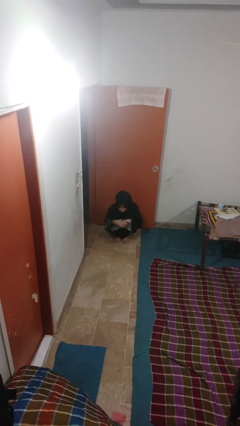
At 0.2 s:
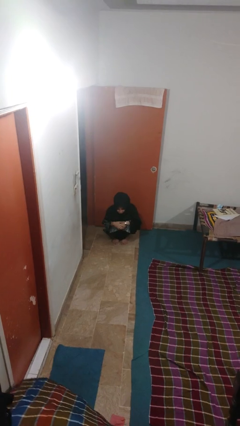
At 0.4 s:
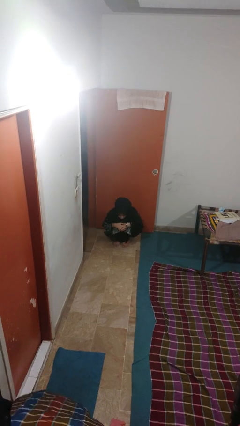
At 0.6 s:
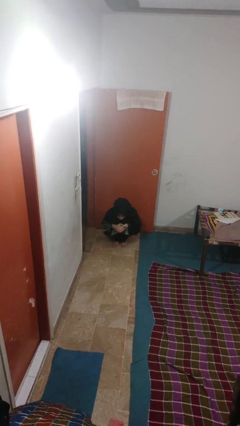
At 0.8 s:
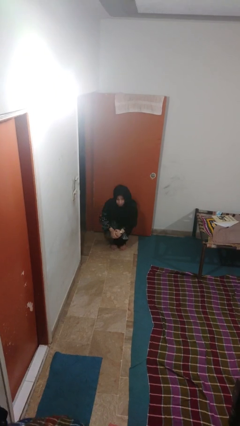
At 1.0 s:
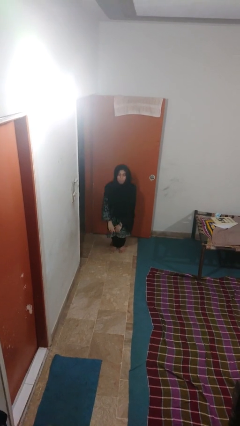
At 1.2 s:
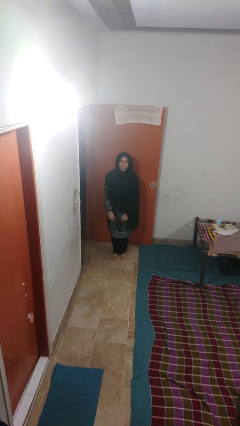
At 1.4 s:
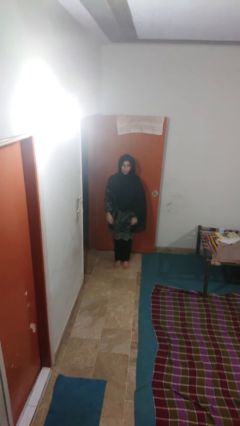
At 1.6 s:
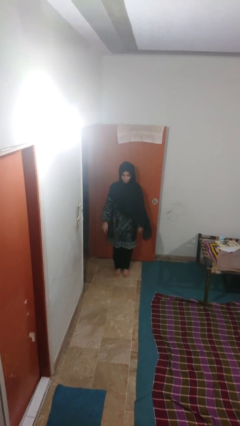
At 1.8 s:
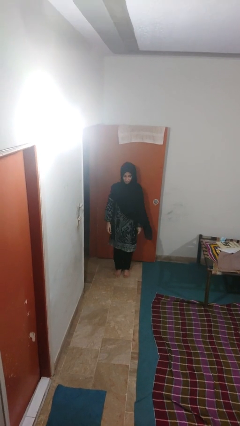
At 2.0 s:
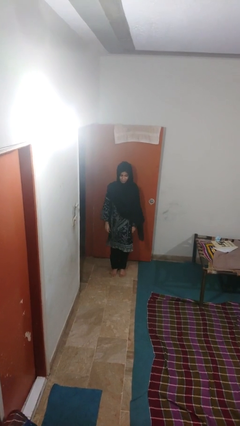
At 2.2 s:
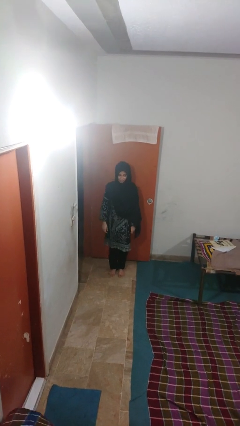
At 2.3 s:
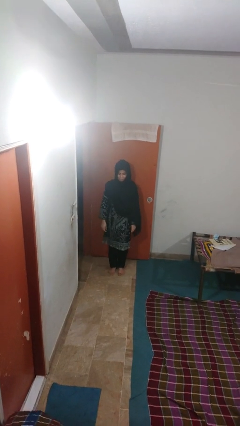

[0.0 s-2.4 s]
person stands up

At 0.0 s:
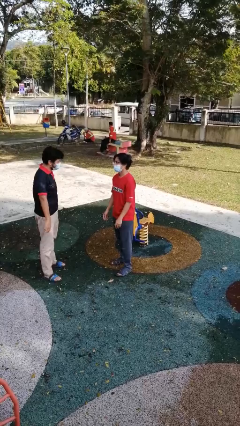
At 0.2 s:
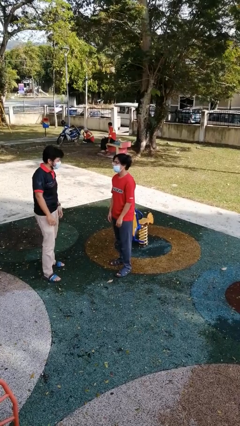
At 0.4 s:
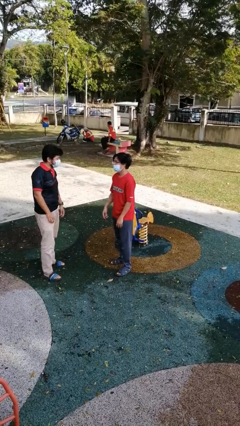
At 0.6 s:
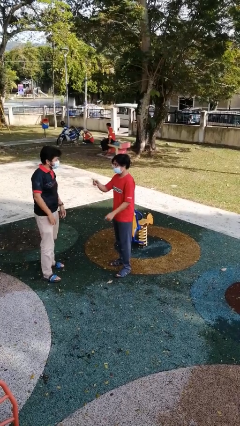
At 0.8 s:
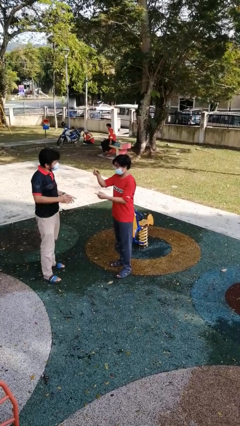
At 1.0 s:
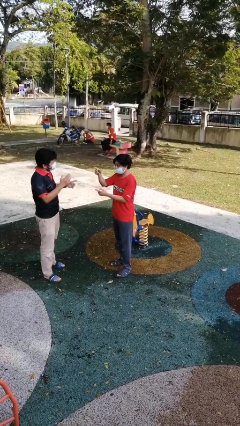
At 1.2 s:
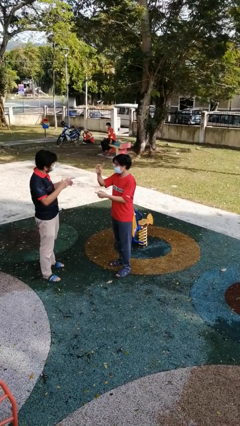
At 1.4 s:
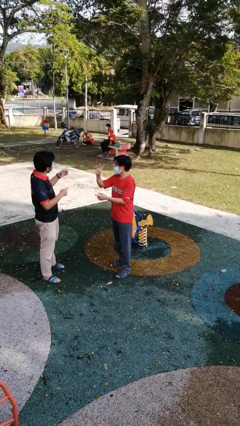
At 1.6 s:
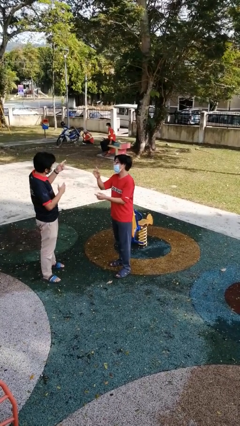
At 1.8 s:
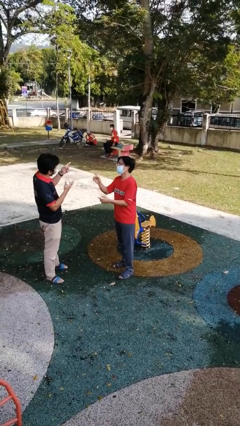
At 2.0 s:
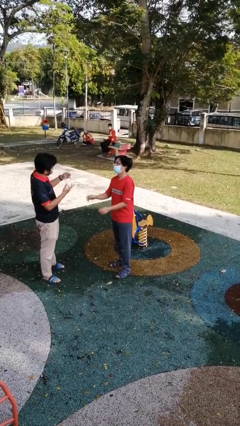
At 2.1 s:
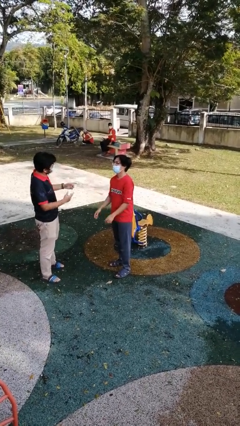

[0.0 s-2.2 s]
person talks to person

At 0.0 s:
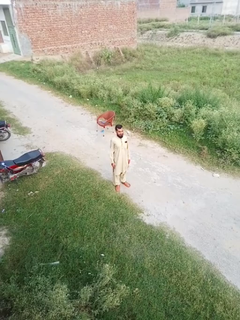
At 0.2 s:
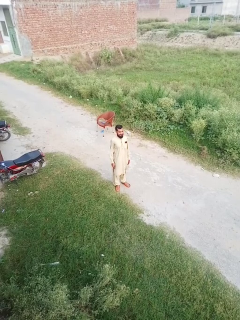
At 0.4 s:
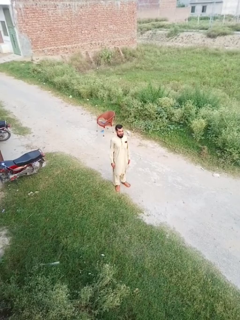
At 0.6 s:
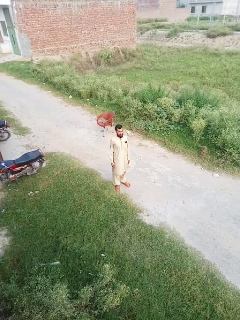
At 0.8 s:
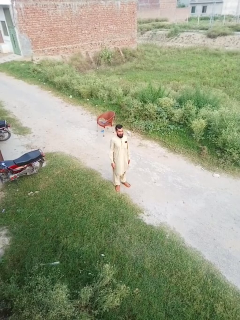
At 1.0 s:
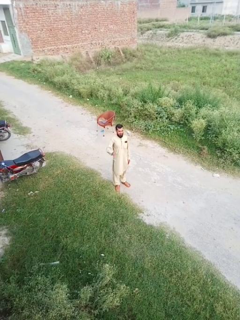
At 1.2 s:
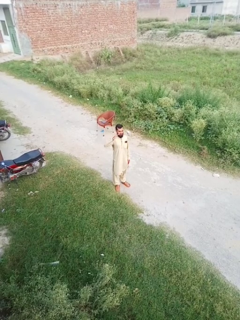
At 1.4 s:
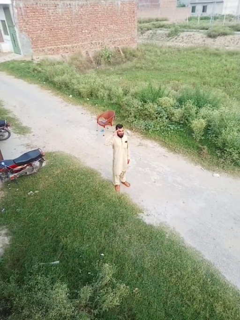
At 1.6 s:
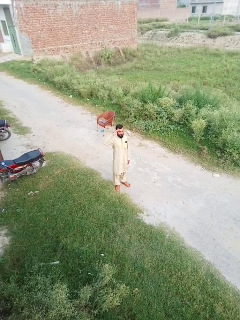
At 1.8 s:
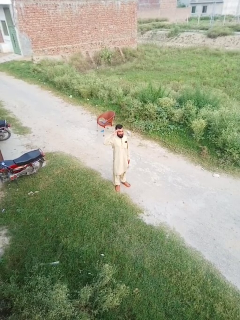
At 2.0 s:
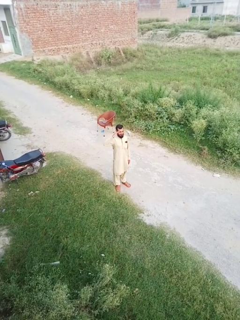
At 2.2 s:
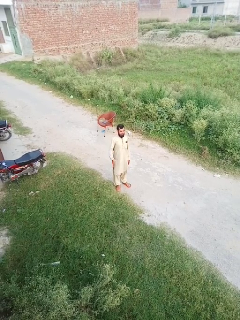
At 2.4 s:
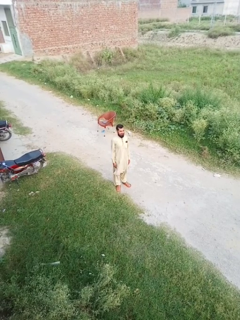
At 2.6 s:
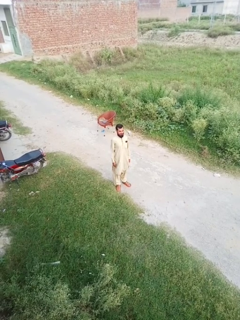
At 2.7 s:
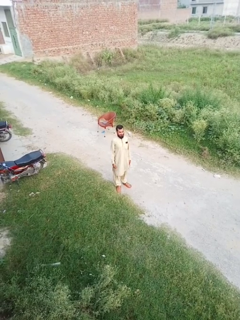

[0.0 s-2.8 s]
person salutes

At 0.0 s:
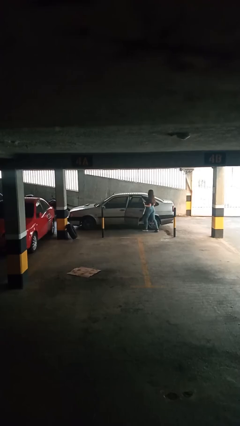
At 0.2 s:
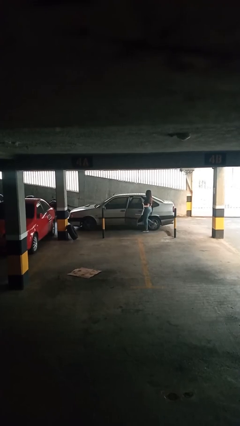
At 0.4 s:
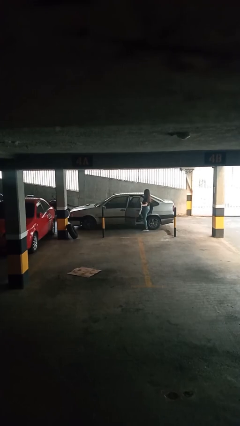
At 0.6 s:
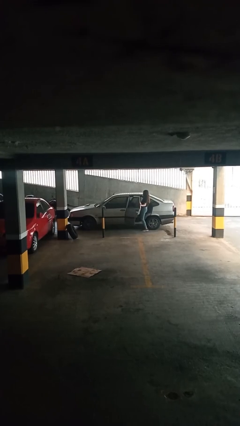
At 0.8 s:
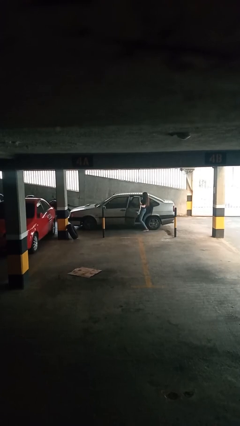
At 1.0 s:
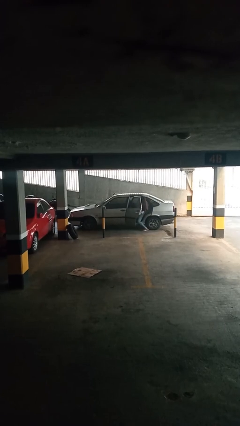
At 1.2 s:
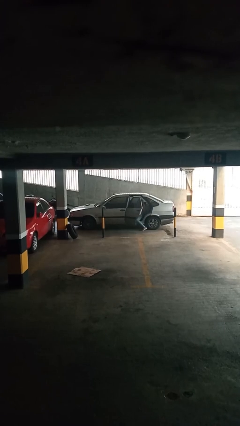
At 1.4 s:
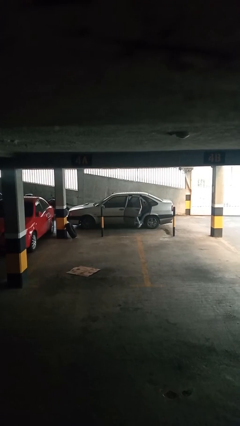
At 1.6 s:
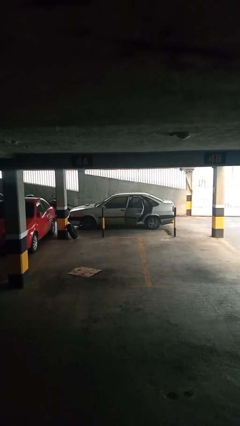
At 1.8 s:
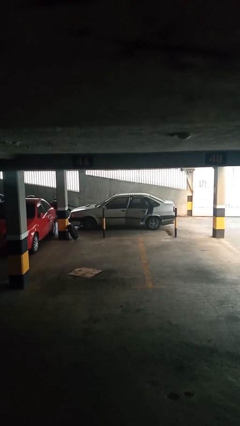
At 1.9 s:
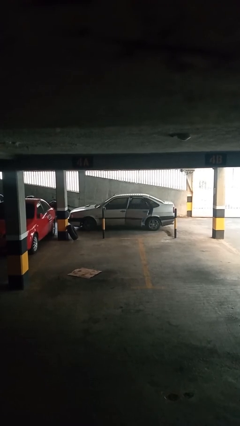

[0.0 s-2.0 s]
car picks up person

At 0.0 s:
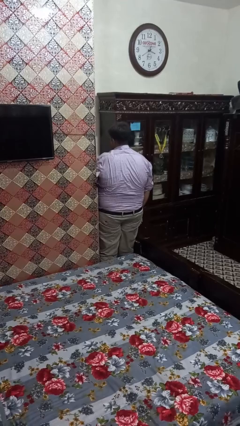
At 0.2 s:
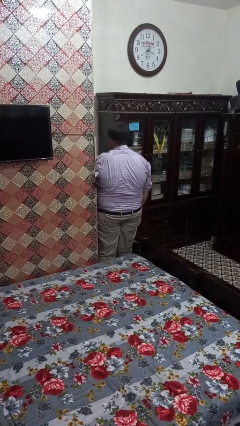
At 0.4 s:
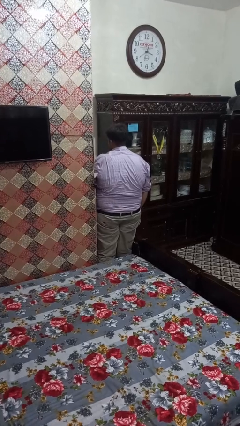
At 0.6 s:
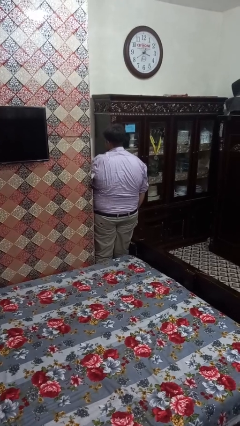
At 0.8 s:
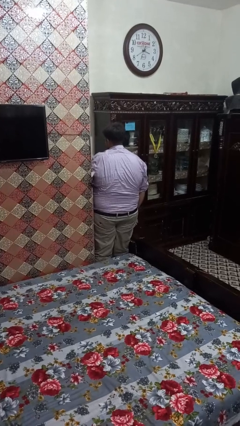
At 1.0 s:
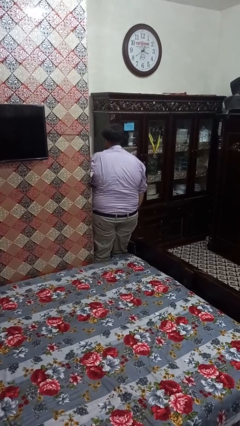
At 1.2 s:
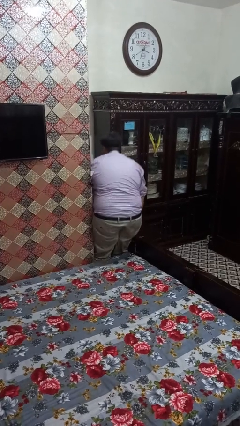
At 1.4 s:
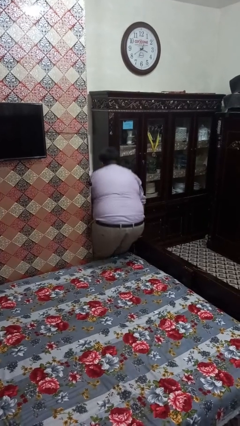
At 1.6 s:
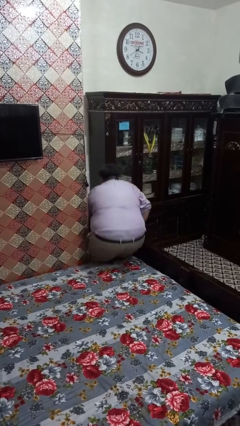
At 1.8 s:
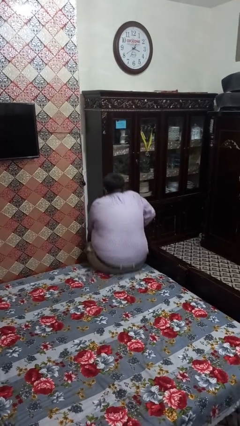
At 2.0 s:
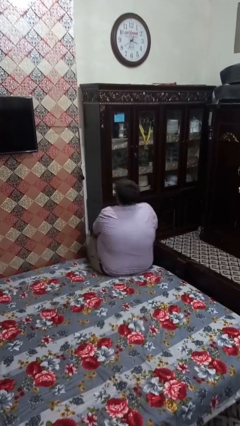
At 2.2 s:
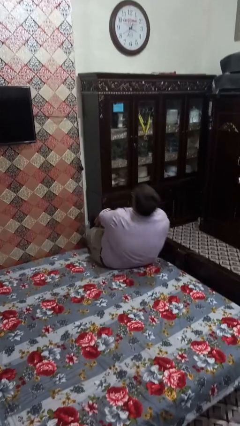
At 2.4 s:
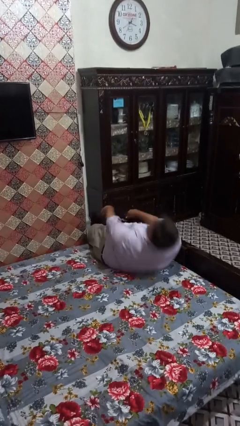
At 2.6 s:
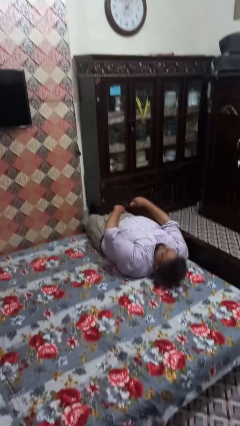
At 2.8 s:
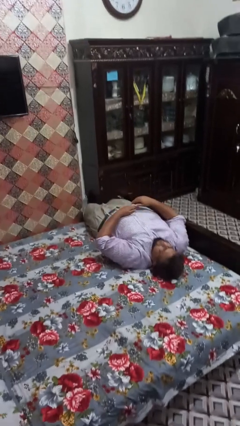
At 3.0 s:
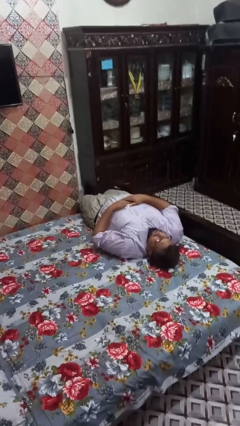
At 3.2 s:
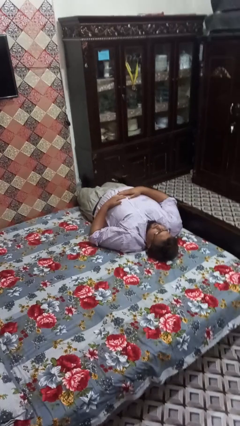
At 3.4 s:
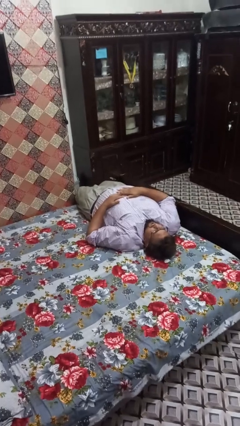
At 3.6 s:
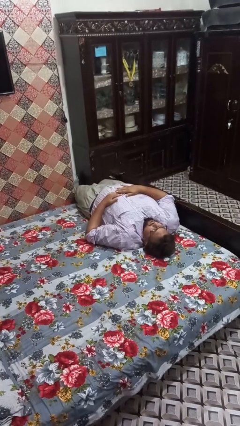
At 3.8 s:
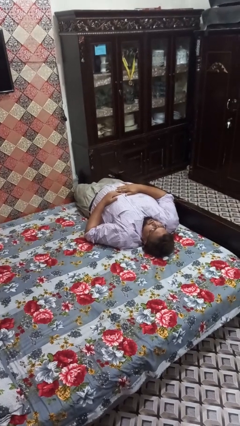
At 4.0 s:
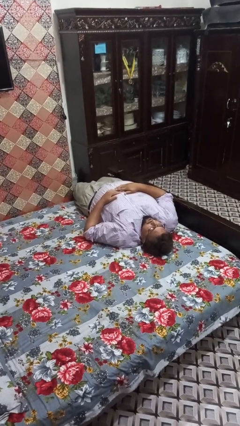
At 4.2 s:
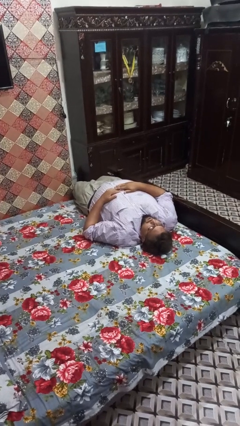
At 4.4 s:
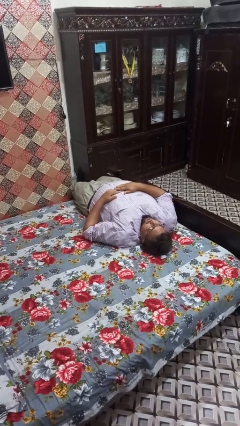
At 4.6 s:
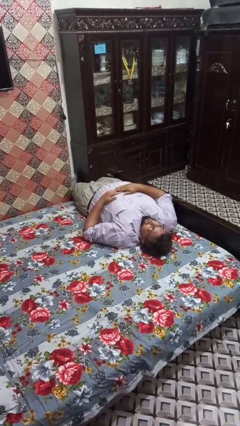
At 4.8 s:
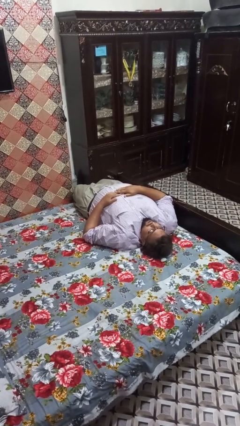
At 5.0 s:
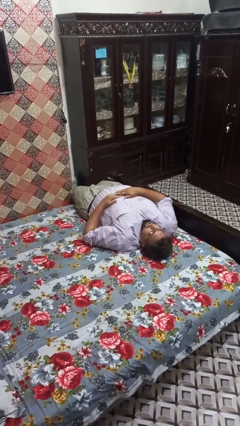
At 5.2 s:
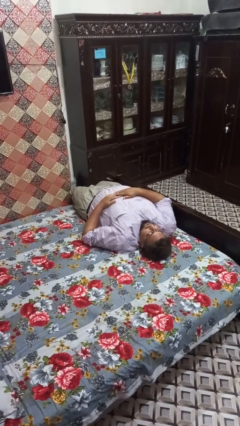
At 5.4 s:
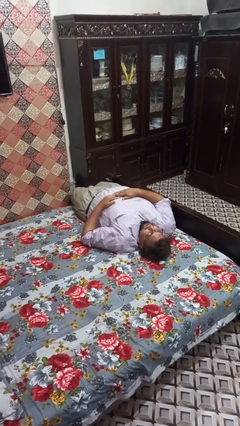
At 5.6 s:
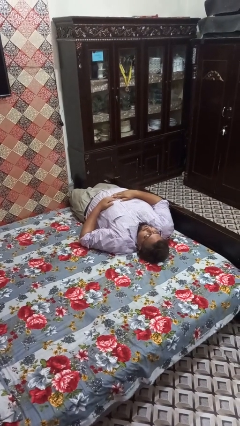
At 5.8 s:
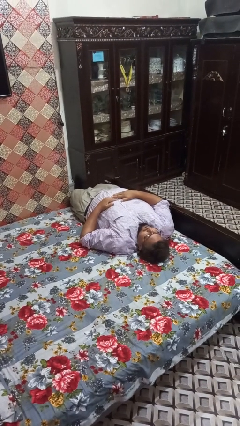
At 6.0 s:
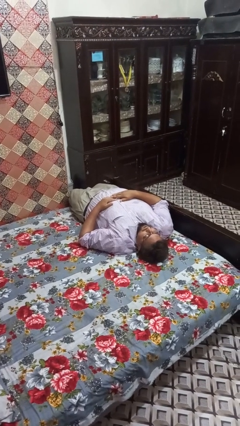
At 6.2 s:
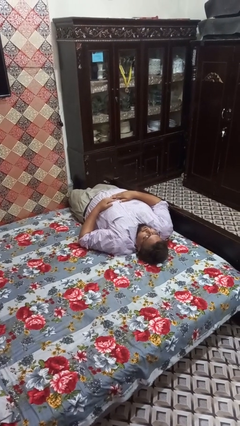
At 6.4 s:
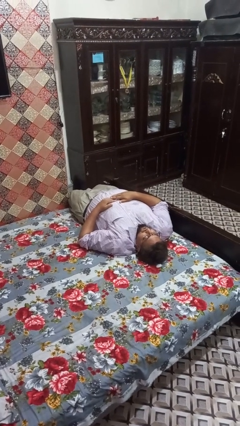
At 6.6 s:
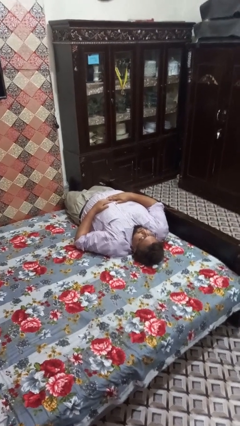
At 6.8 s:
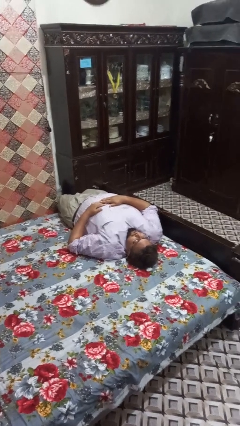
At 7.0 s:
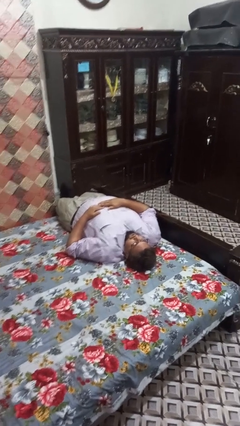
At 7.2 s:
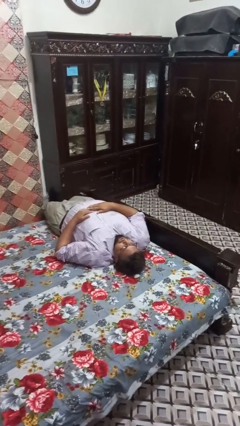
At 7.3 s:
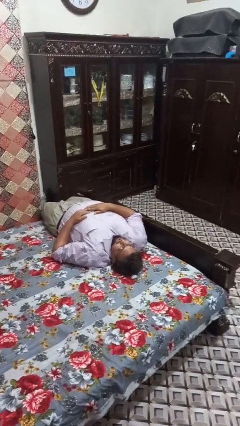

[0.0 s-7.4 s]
person lies down on bed

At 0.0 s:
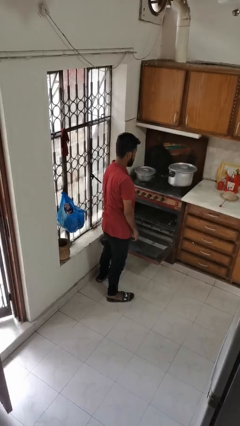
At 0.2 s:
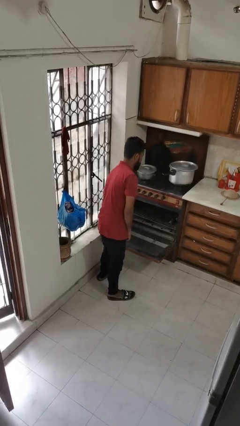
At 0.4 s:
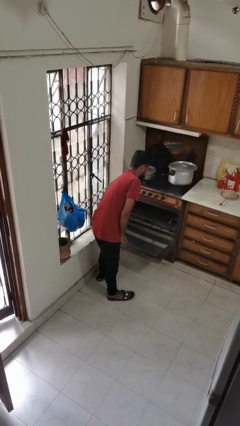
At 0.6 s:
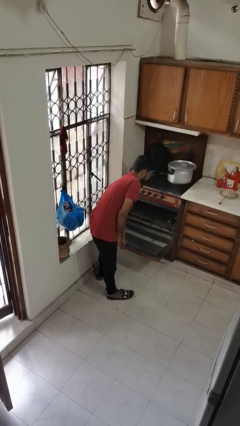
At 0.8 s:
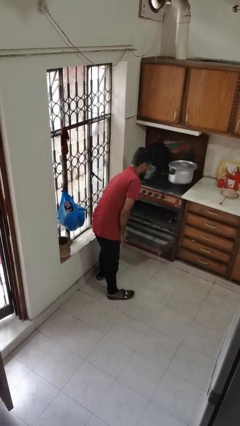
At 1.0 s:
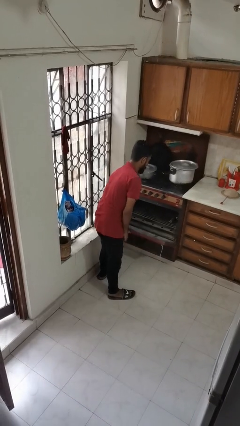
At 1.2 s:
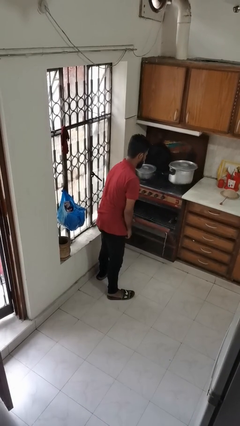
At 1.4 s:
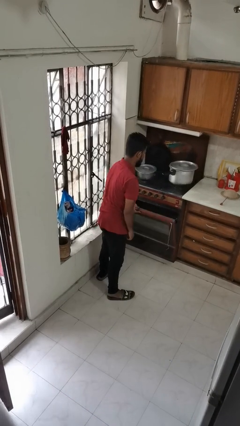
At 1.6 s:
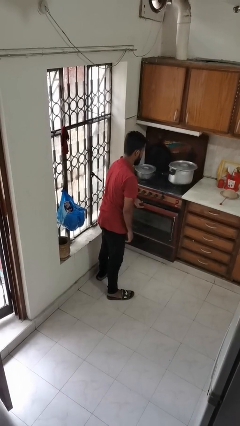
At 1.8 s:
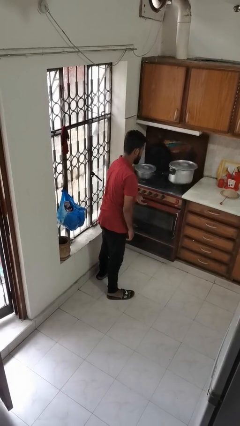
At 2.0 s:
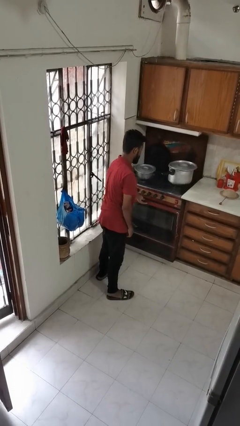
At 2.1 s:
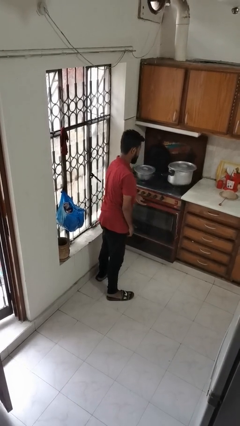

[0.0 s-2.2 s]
person closes oven door
